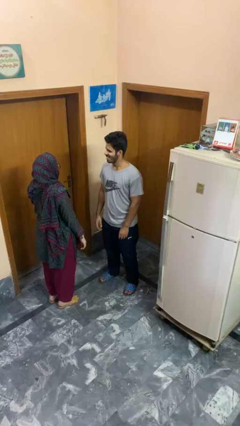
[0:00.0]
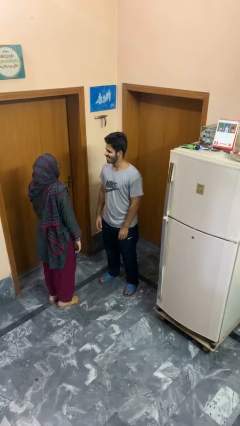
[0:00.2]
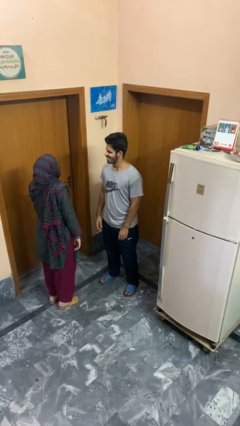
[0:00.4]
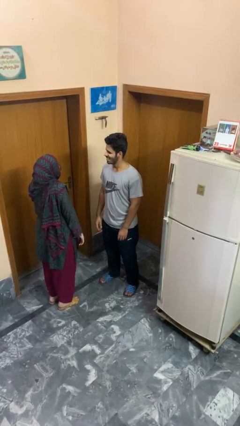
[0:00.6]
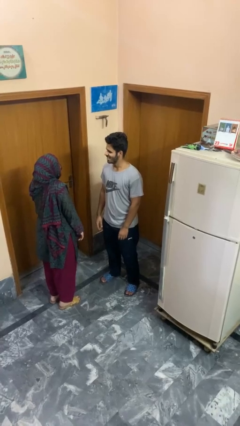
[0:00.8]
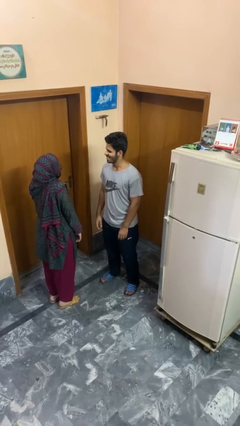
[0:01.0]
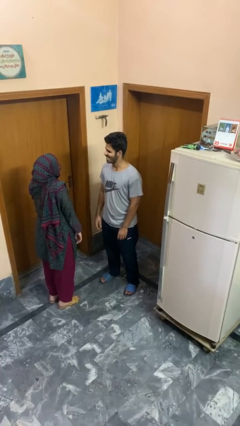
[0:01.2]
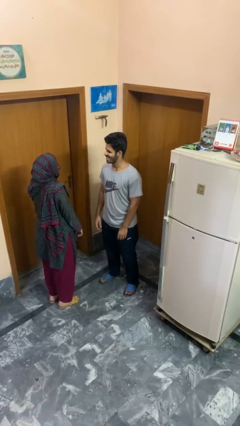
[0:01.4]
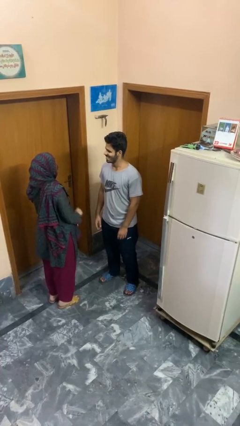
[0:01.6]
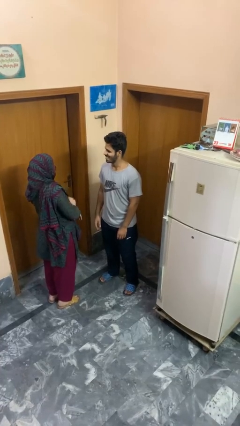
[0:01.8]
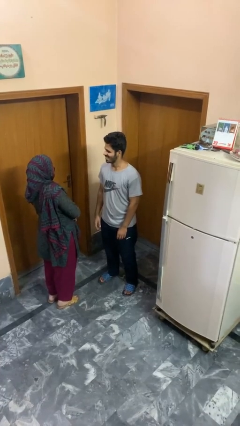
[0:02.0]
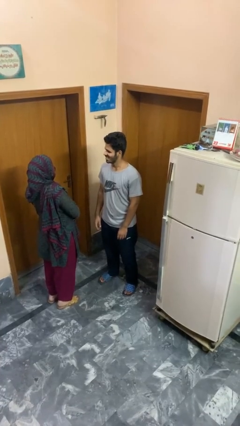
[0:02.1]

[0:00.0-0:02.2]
person laughs with person

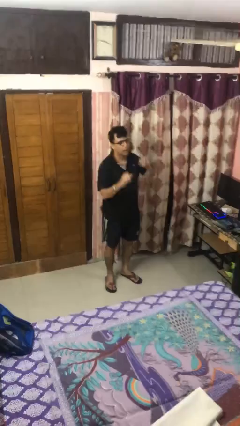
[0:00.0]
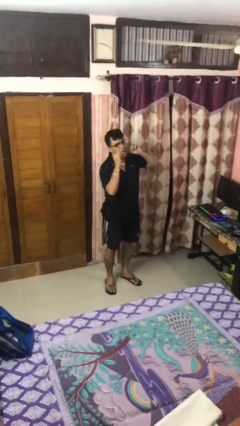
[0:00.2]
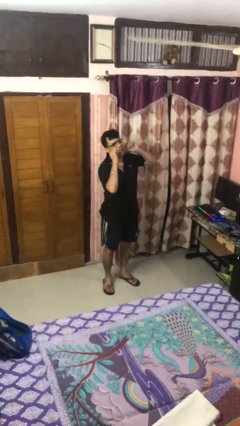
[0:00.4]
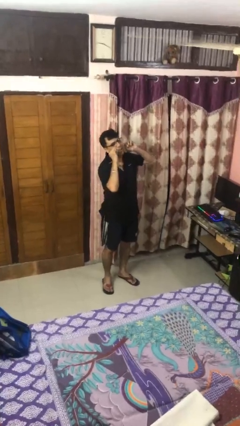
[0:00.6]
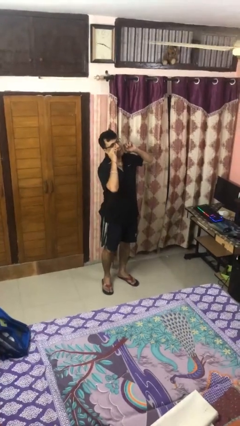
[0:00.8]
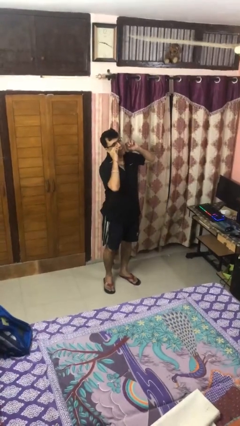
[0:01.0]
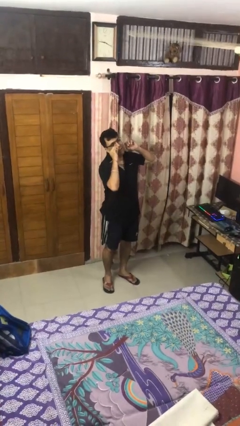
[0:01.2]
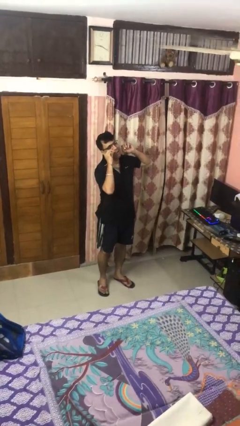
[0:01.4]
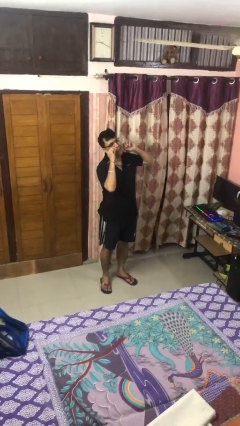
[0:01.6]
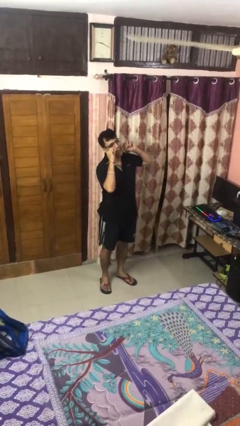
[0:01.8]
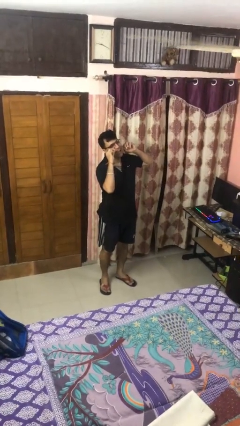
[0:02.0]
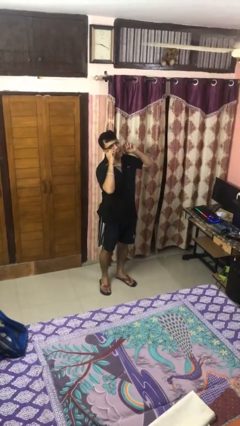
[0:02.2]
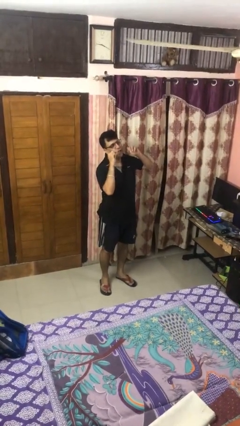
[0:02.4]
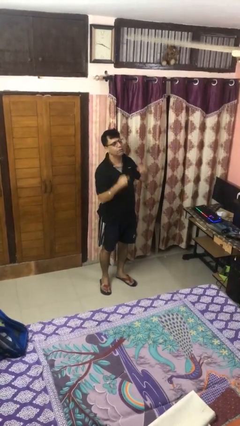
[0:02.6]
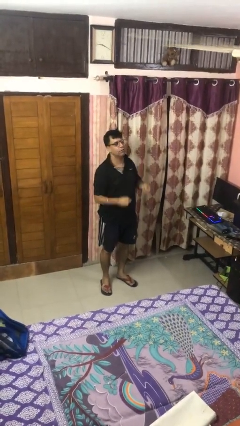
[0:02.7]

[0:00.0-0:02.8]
person flosses

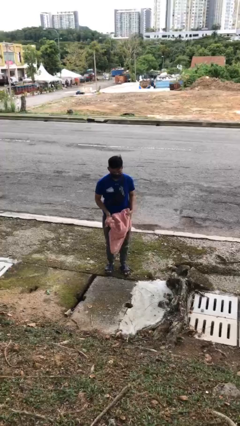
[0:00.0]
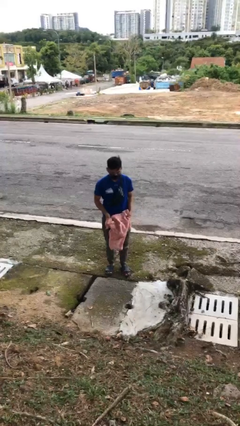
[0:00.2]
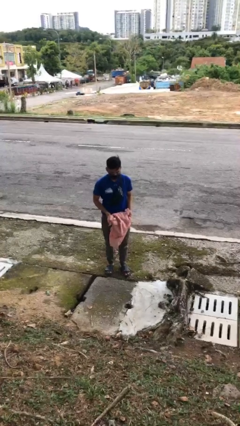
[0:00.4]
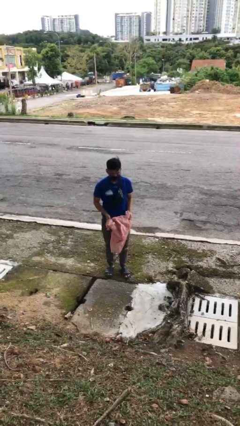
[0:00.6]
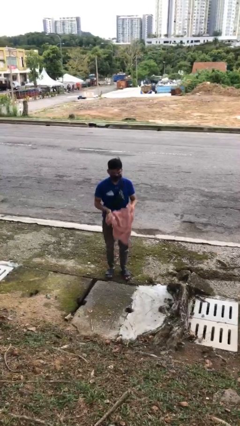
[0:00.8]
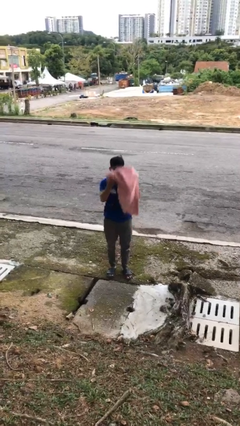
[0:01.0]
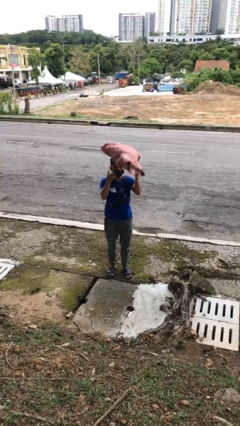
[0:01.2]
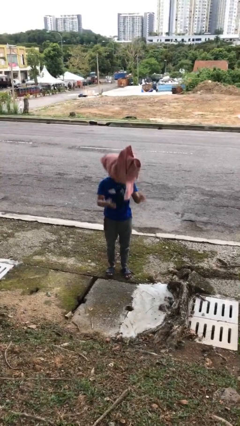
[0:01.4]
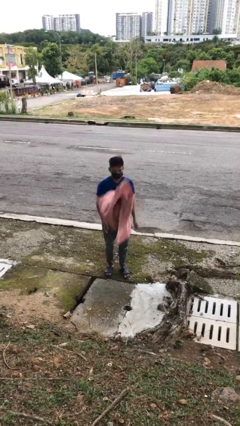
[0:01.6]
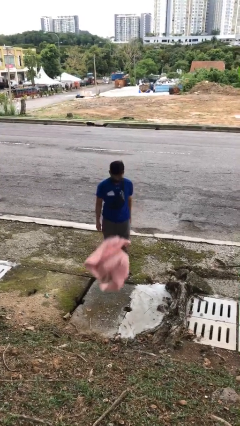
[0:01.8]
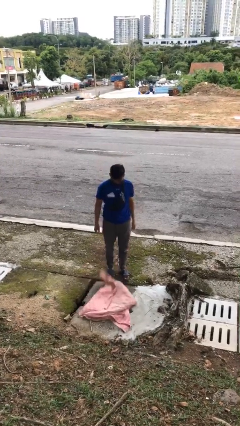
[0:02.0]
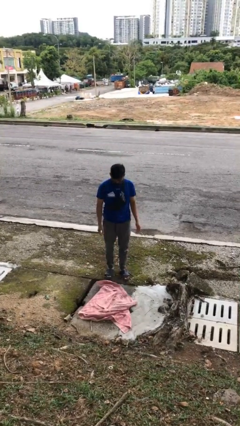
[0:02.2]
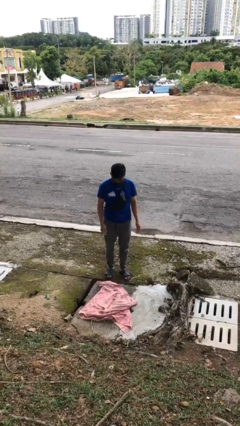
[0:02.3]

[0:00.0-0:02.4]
person throws object into air

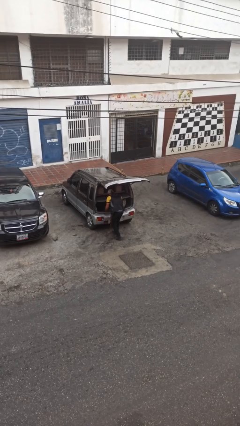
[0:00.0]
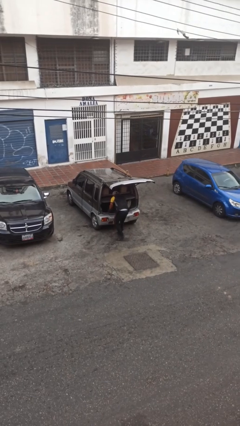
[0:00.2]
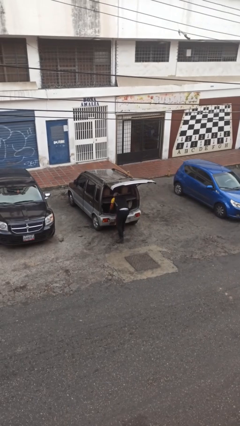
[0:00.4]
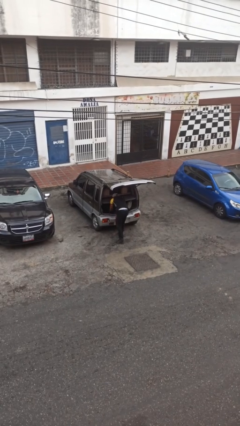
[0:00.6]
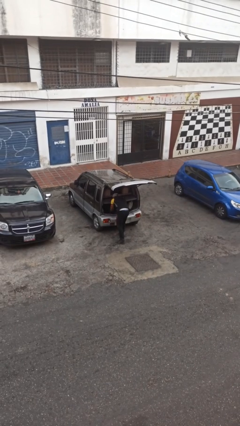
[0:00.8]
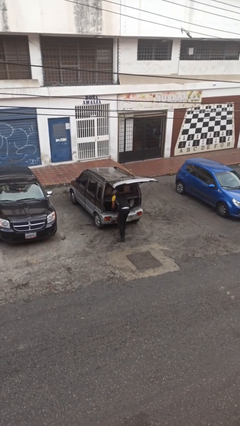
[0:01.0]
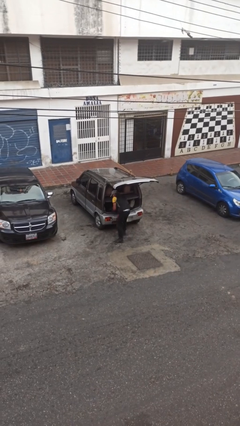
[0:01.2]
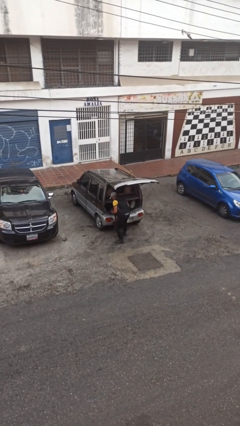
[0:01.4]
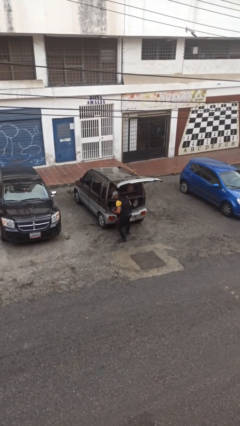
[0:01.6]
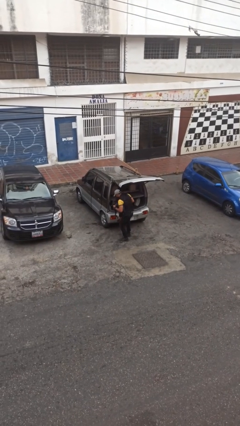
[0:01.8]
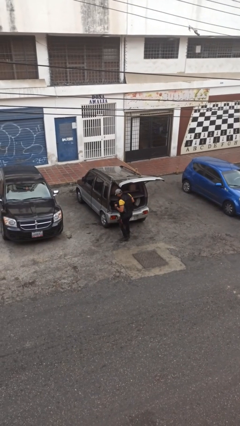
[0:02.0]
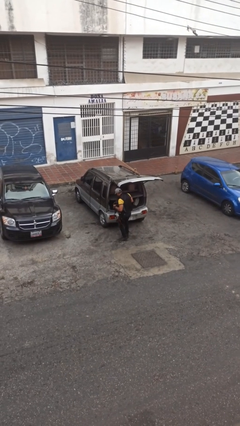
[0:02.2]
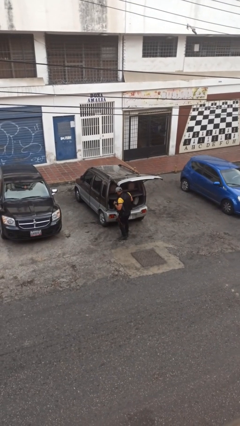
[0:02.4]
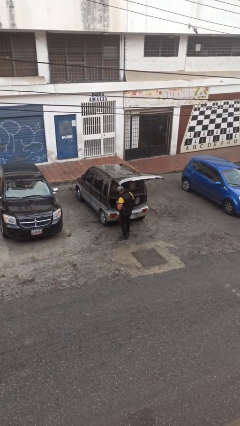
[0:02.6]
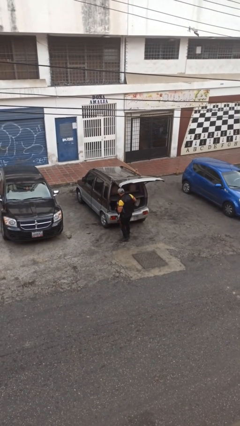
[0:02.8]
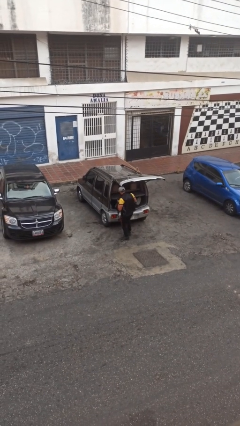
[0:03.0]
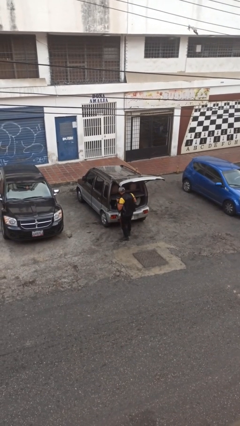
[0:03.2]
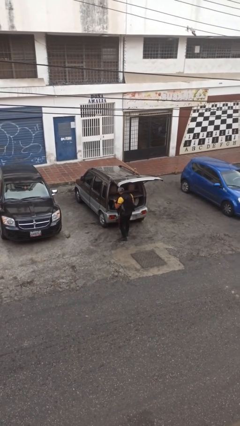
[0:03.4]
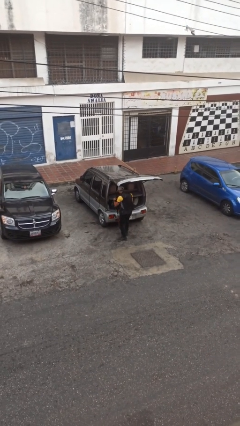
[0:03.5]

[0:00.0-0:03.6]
person unloads car

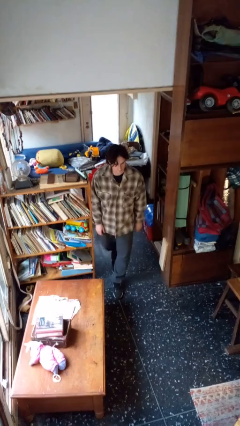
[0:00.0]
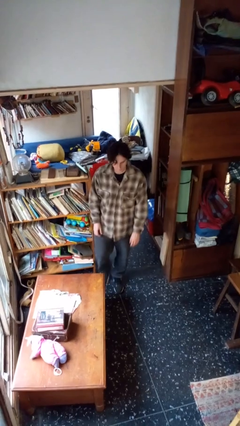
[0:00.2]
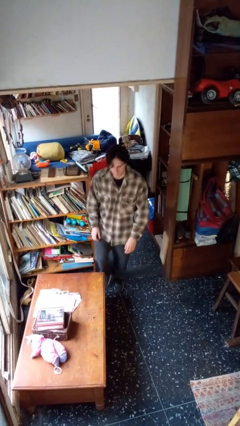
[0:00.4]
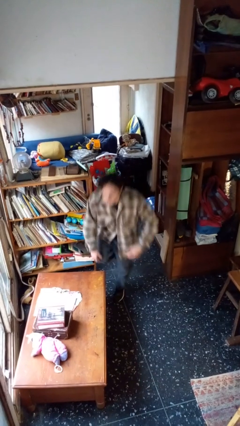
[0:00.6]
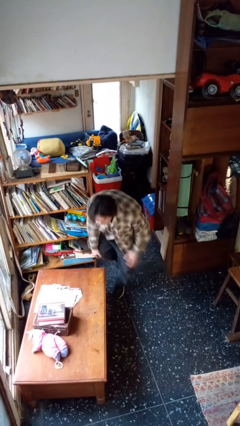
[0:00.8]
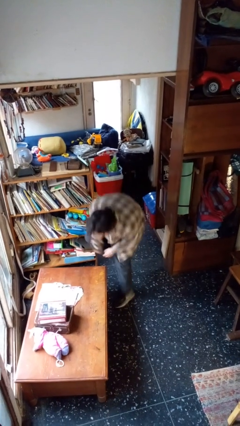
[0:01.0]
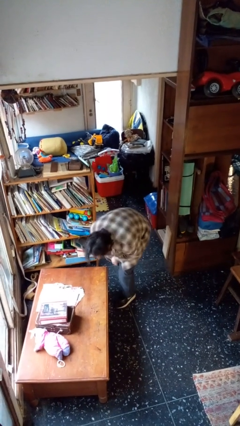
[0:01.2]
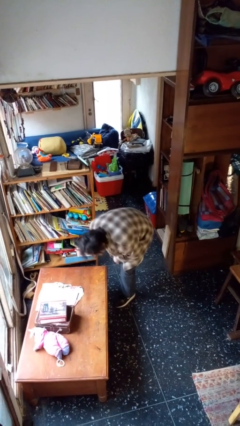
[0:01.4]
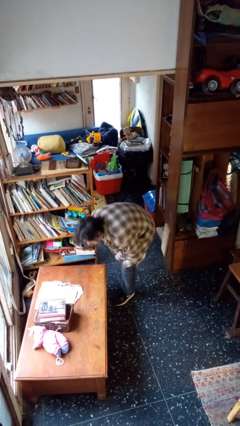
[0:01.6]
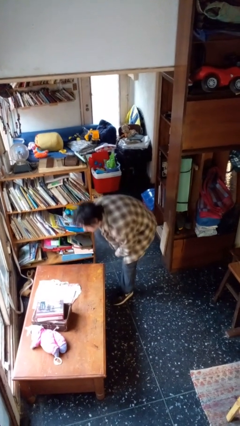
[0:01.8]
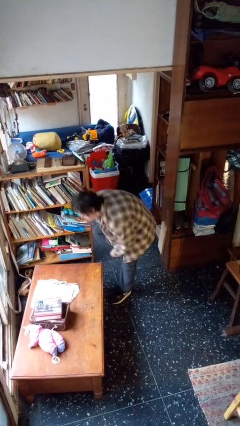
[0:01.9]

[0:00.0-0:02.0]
person bumps into table

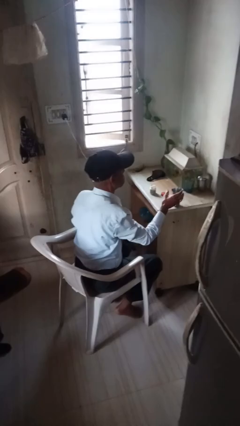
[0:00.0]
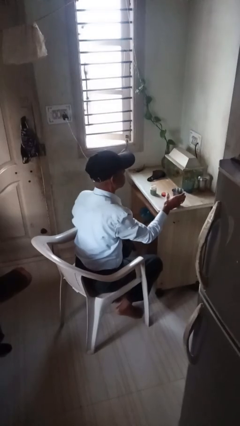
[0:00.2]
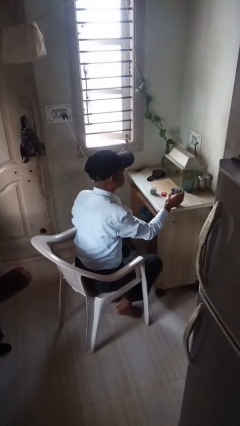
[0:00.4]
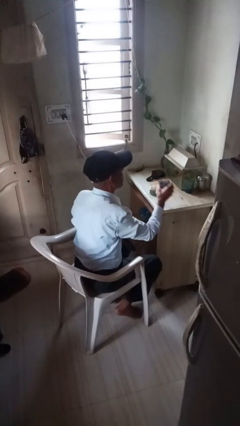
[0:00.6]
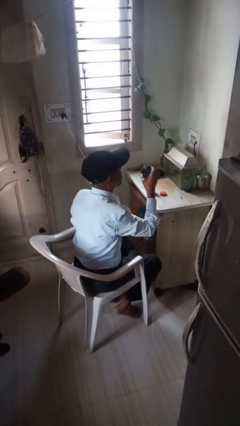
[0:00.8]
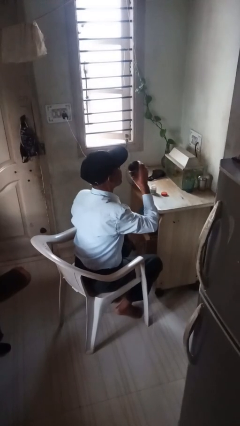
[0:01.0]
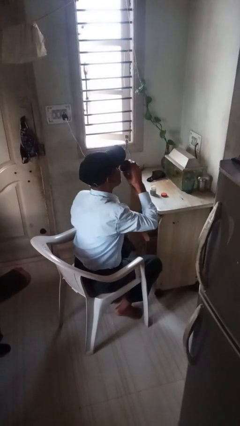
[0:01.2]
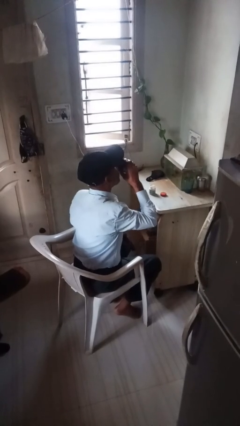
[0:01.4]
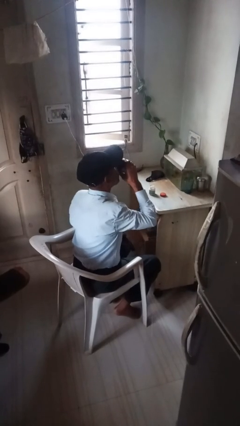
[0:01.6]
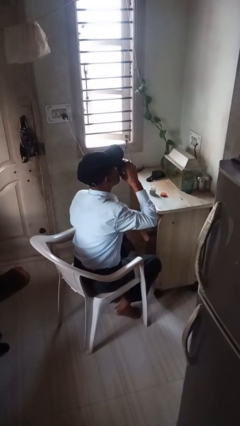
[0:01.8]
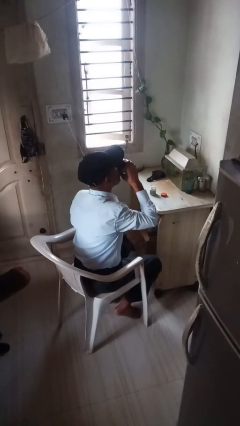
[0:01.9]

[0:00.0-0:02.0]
person drinks from cup
